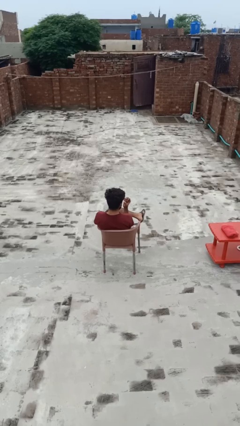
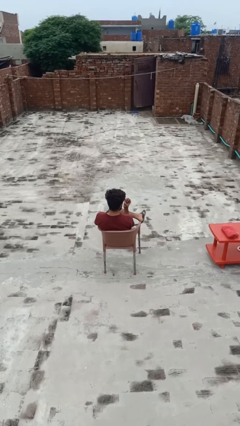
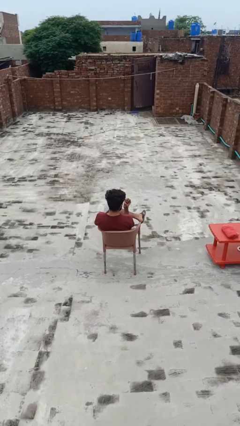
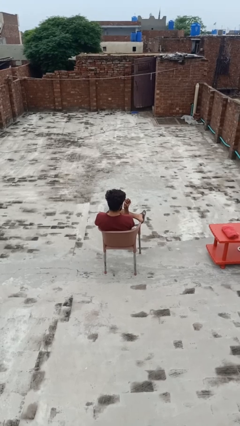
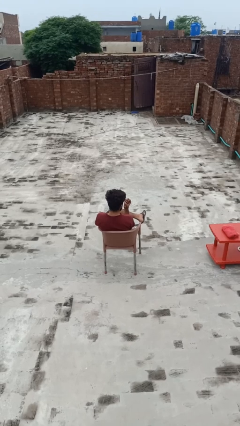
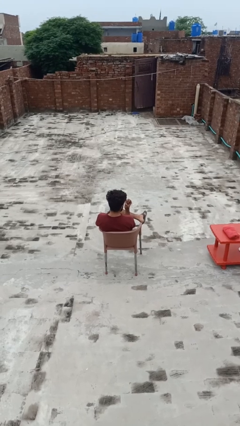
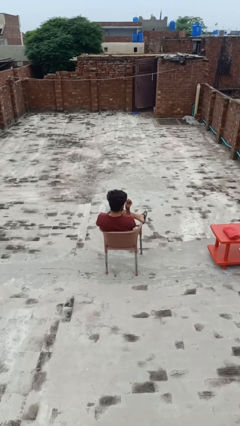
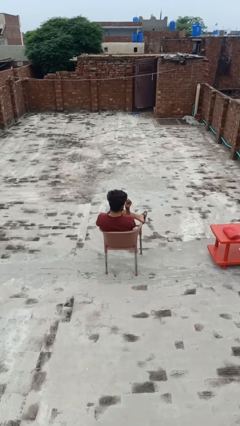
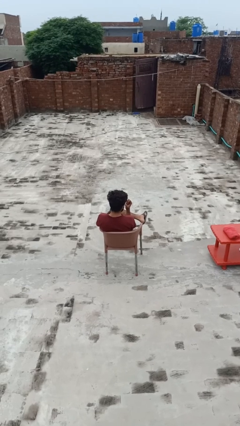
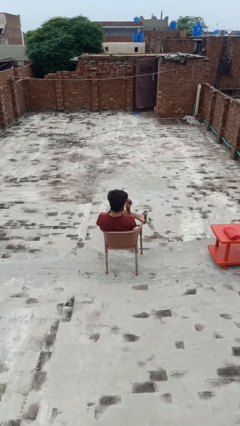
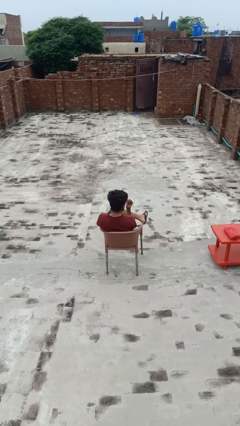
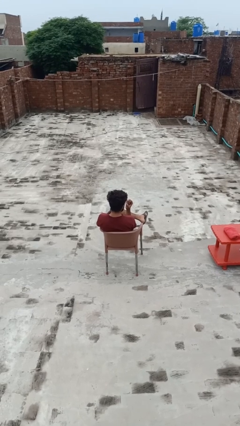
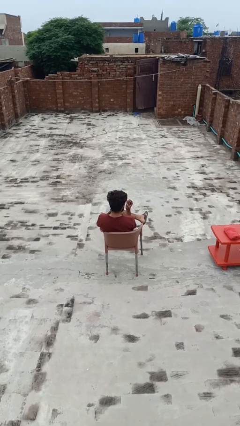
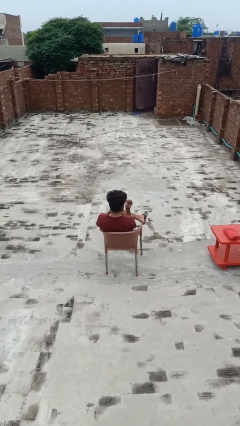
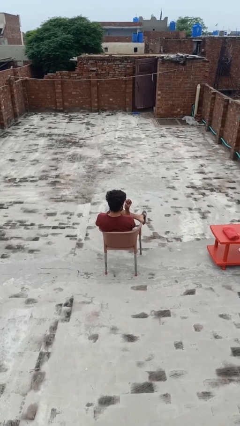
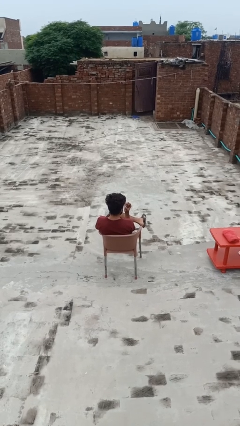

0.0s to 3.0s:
person paints fingernails

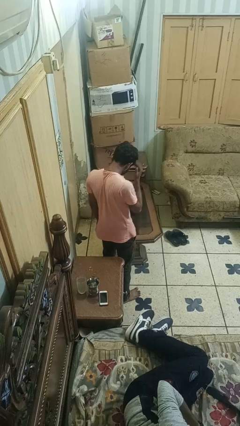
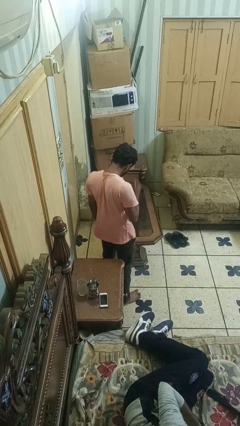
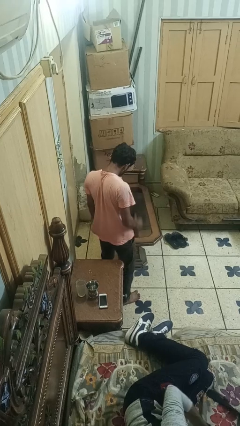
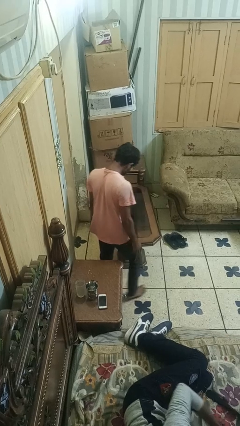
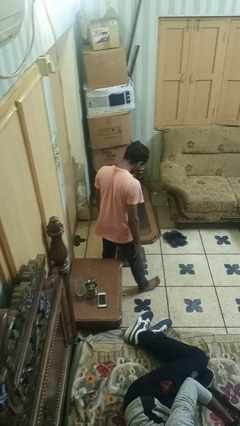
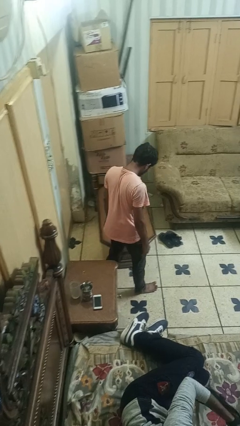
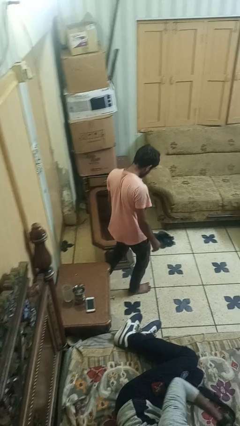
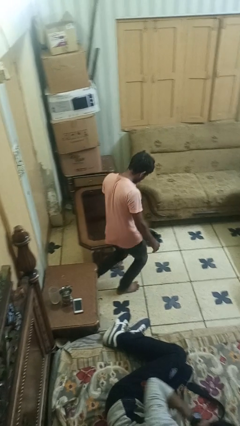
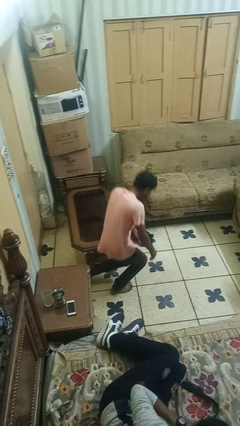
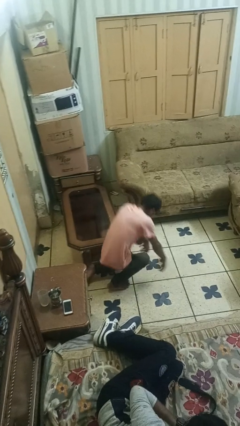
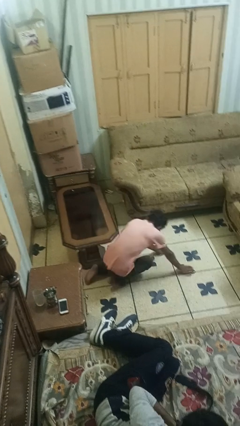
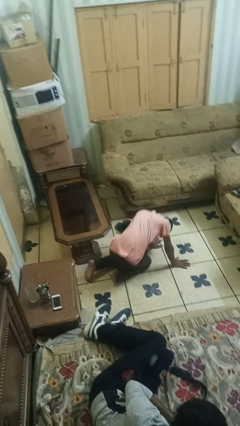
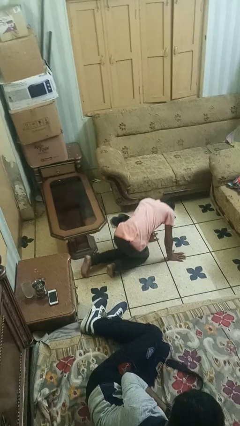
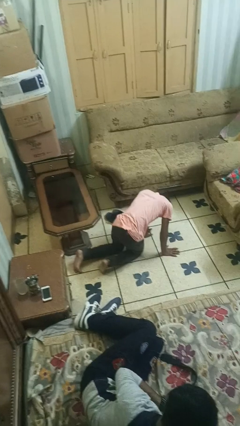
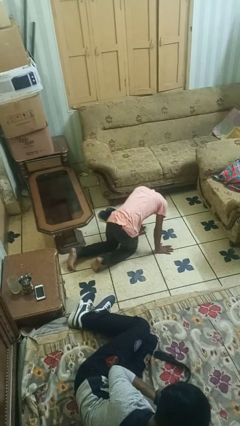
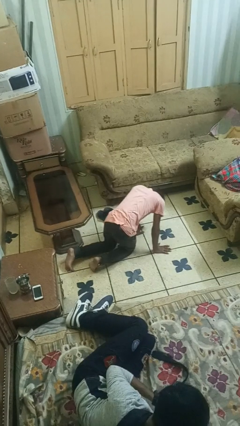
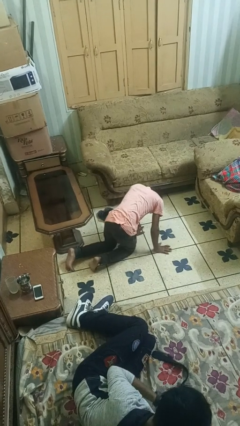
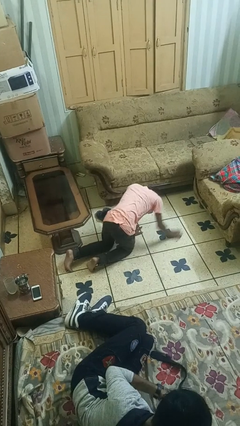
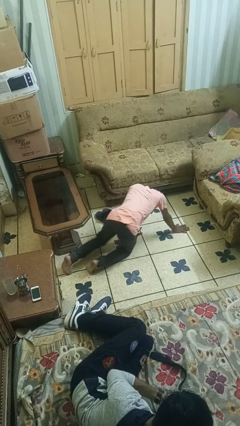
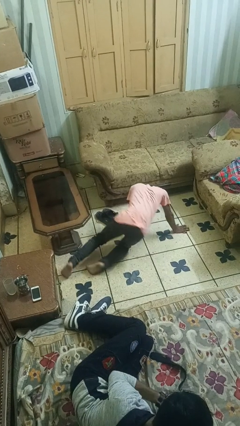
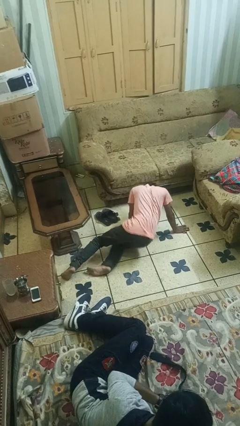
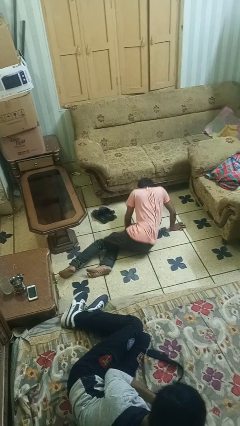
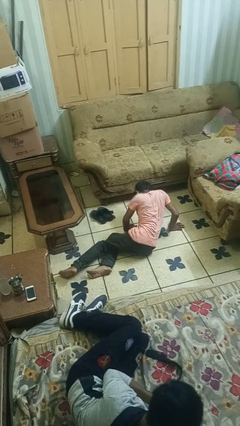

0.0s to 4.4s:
person trips on object on floor

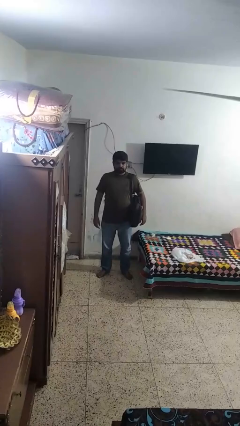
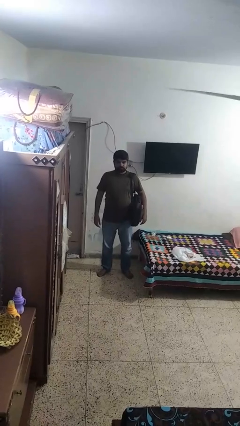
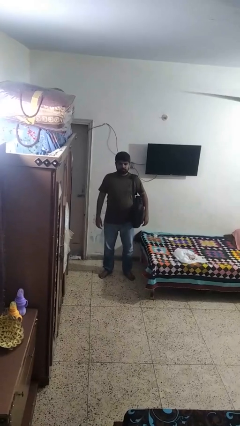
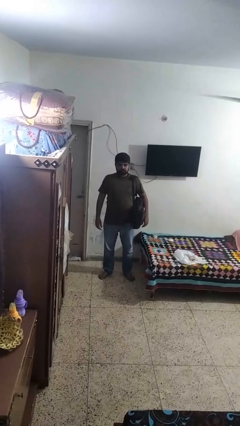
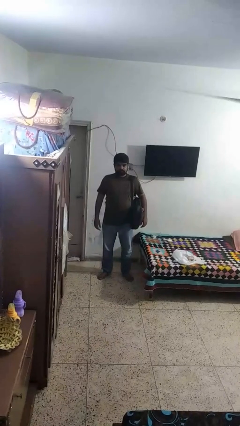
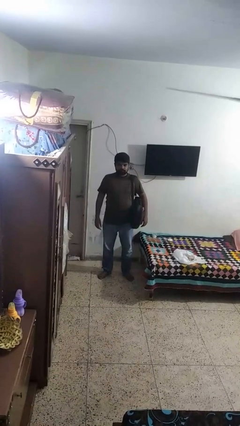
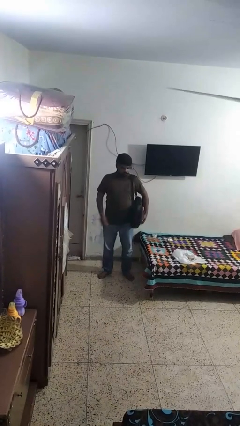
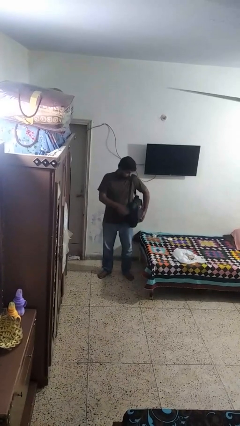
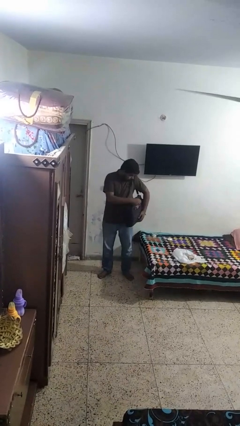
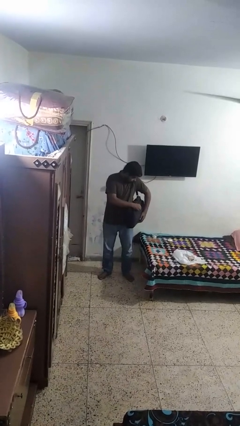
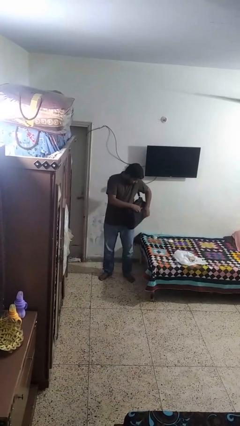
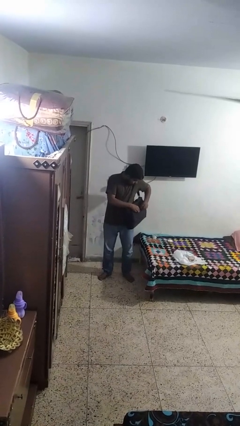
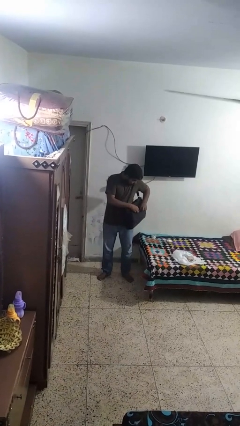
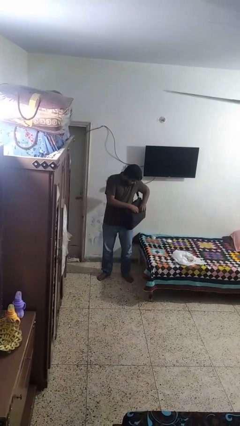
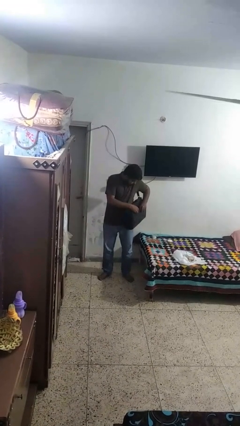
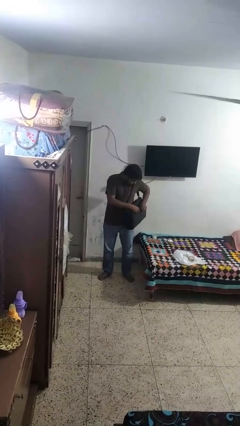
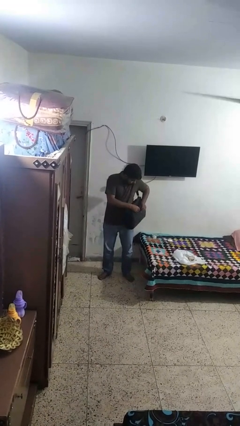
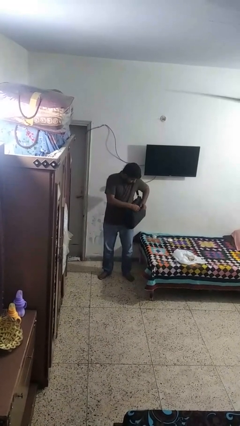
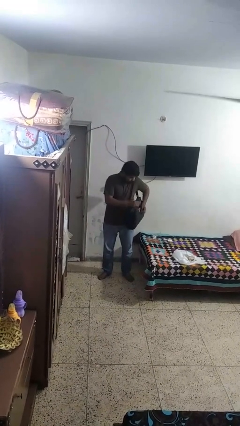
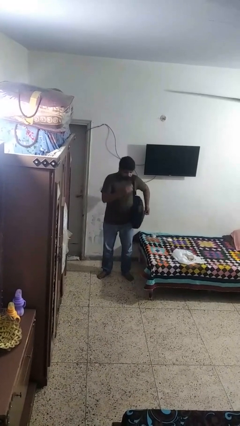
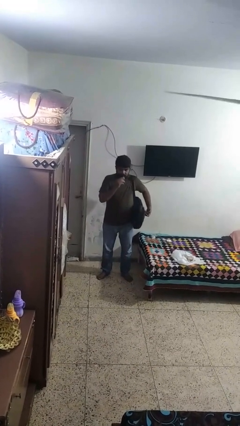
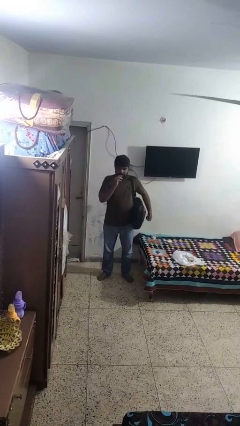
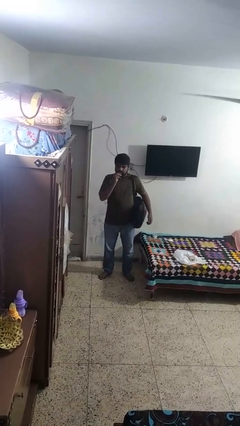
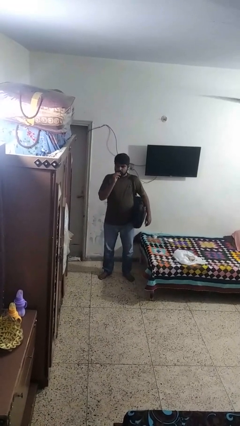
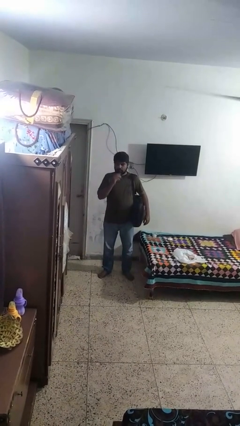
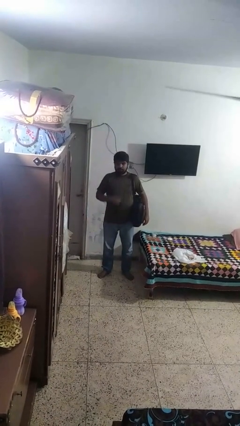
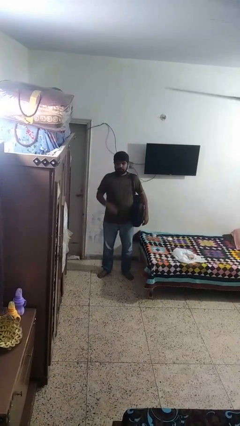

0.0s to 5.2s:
person eats snack from bag

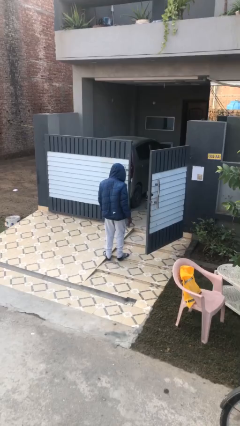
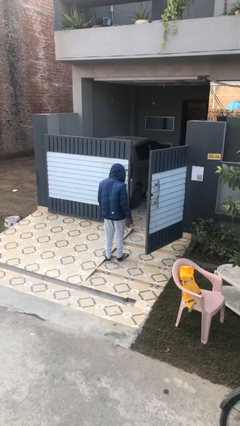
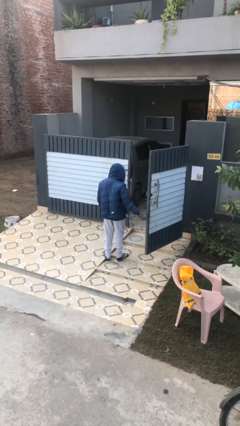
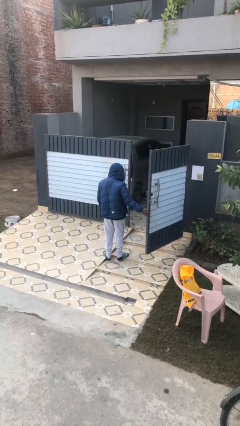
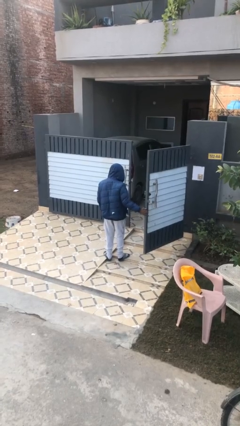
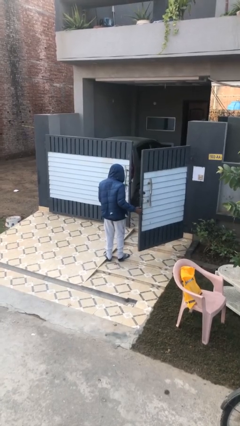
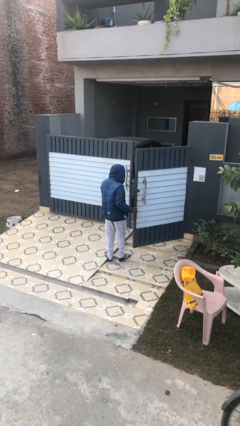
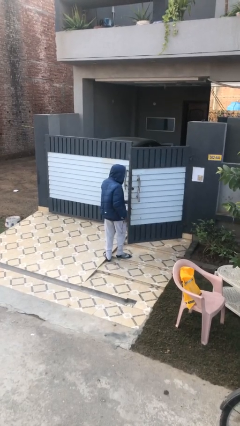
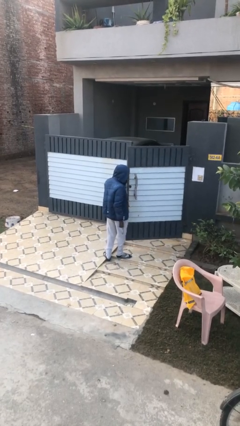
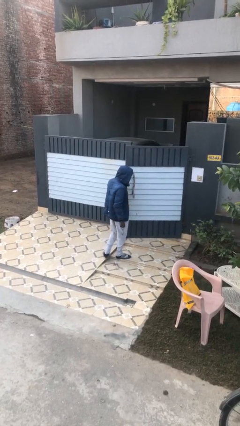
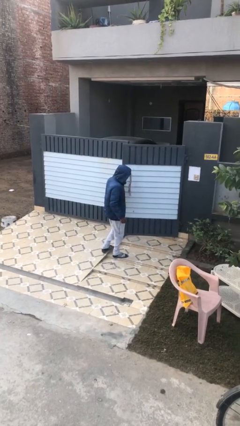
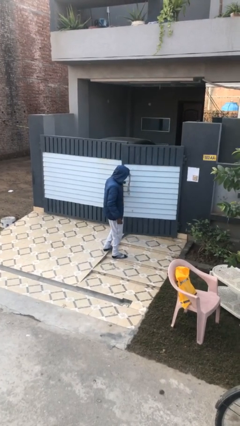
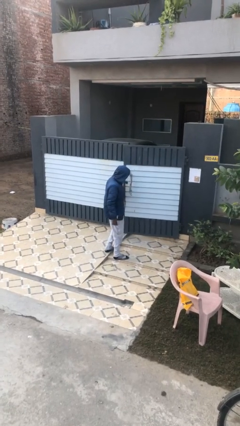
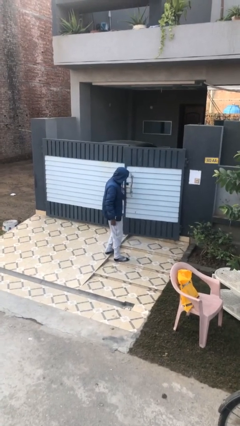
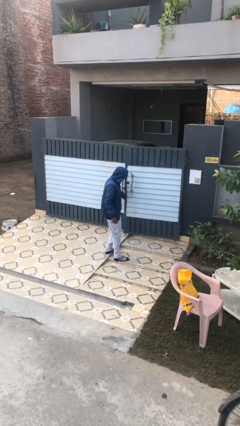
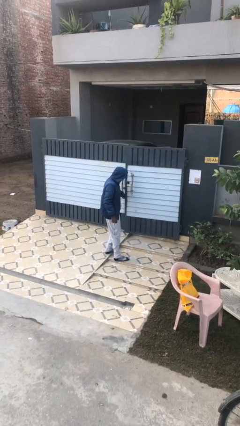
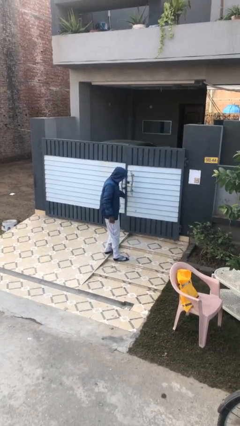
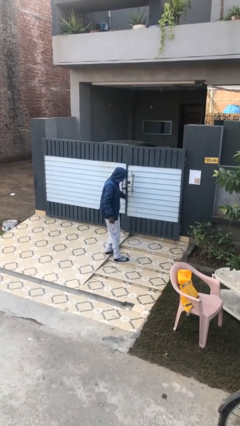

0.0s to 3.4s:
person closes facility door

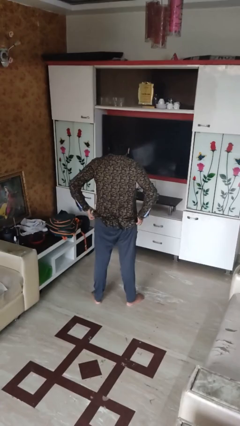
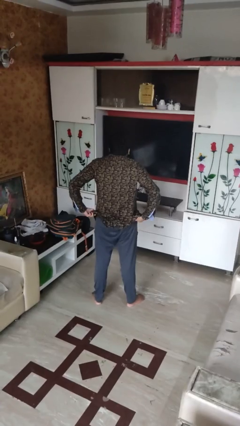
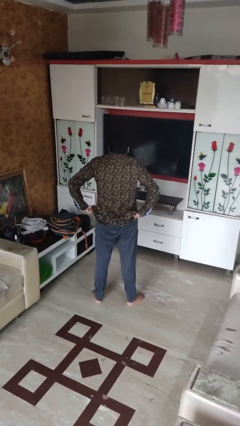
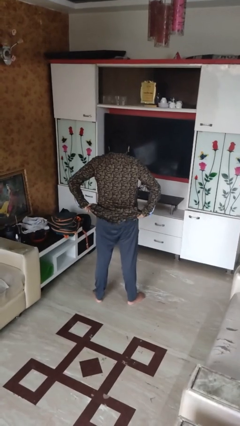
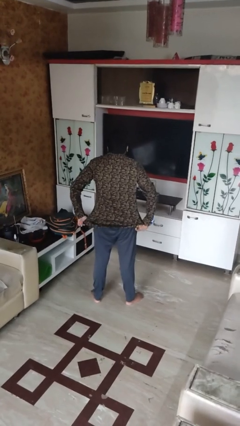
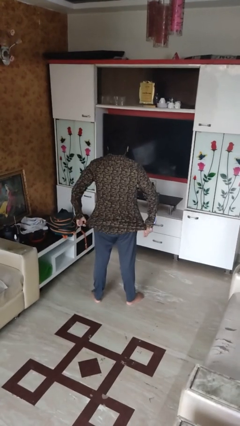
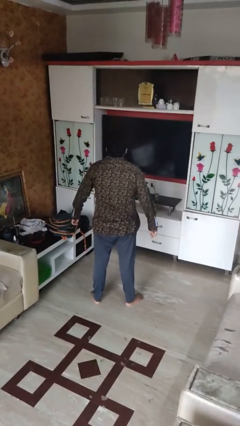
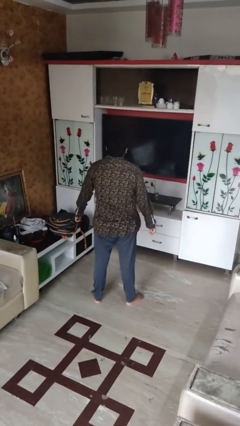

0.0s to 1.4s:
person untucks shirt
